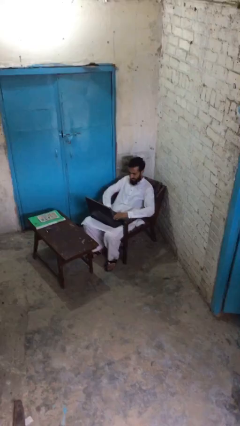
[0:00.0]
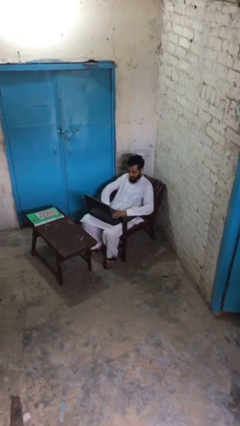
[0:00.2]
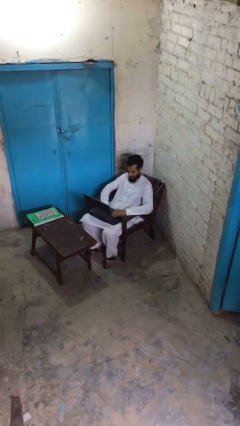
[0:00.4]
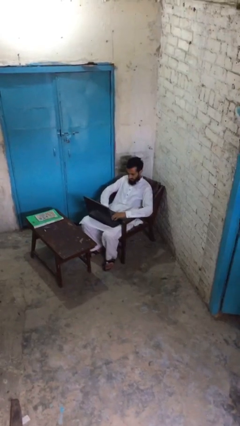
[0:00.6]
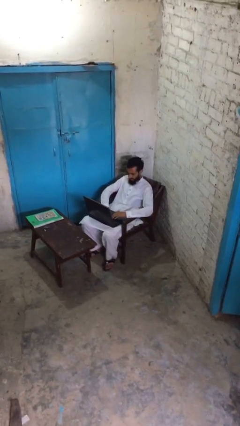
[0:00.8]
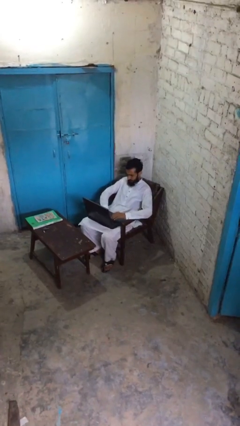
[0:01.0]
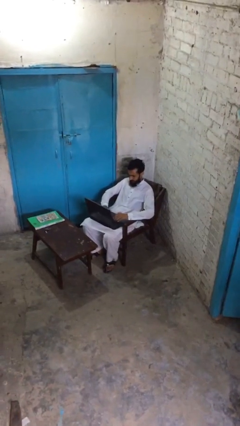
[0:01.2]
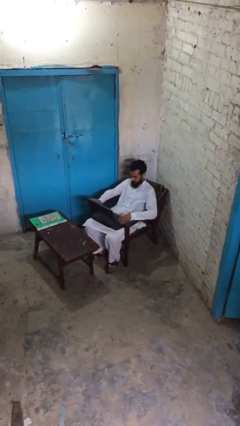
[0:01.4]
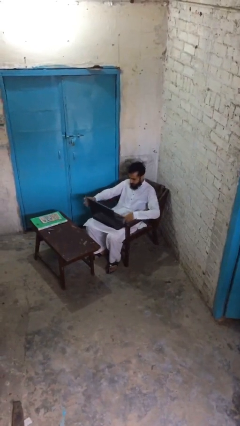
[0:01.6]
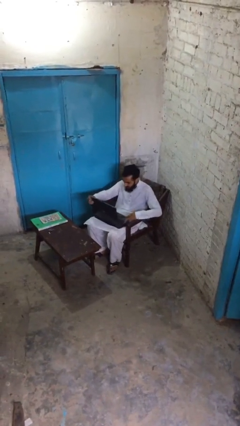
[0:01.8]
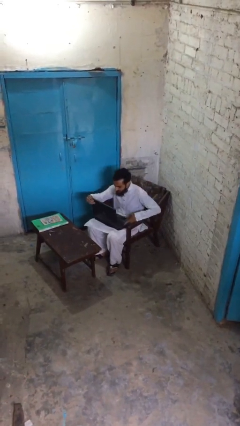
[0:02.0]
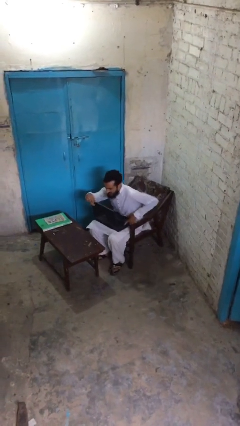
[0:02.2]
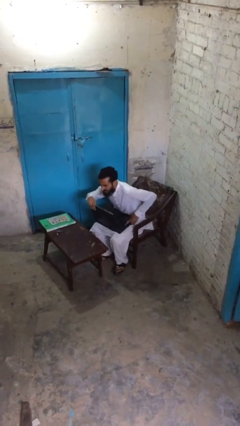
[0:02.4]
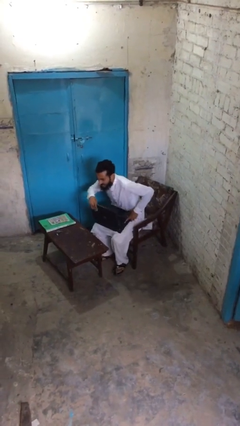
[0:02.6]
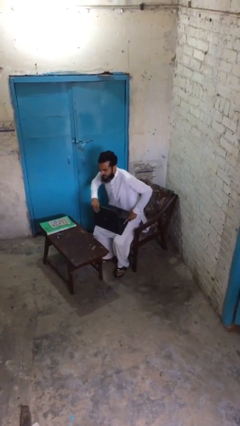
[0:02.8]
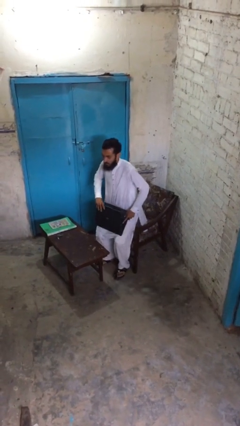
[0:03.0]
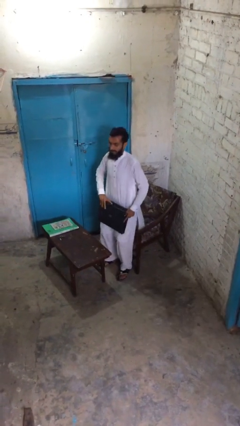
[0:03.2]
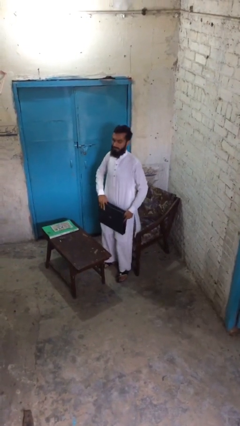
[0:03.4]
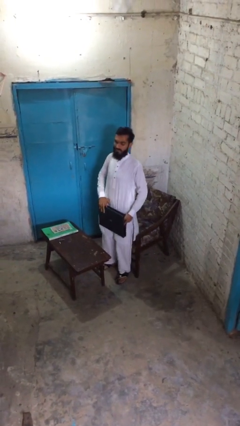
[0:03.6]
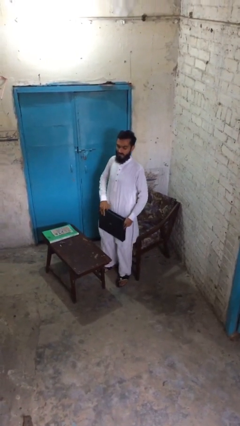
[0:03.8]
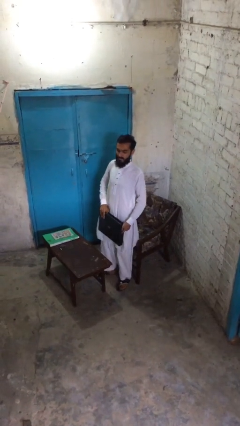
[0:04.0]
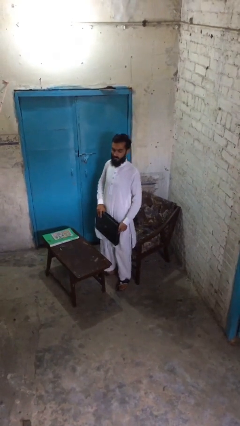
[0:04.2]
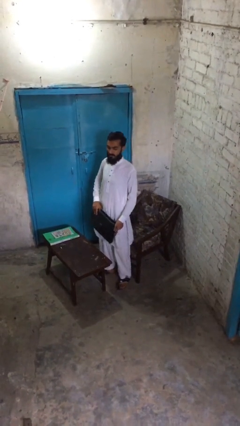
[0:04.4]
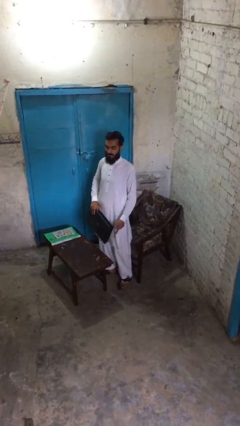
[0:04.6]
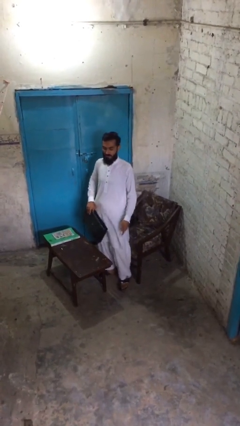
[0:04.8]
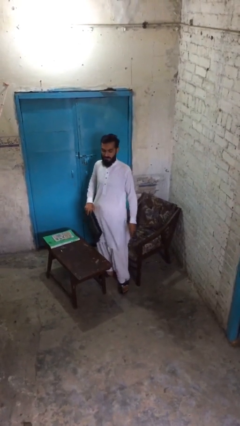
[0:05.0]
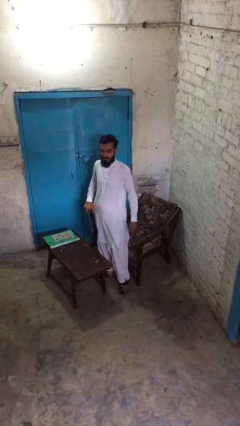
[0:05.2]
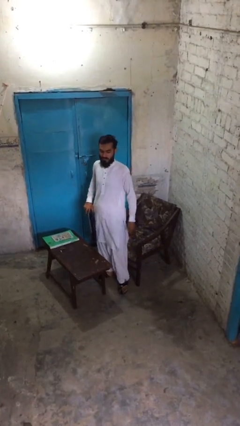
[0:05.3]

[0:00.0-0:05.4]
person stands up

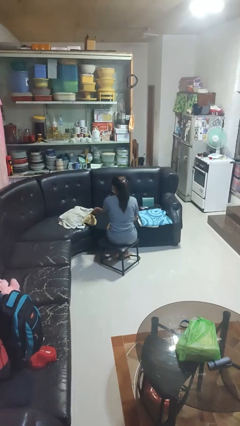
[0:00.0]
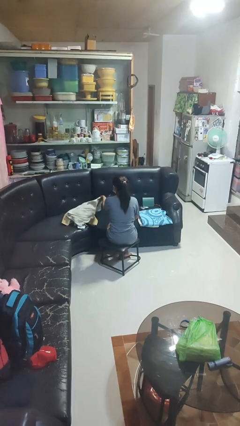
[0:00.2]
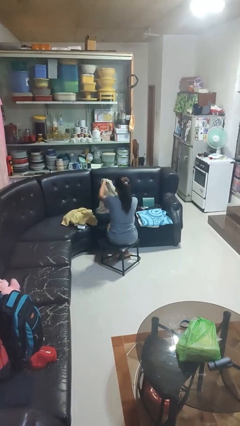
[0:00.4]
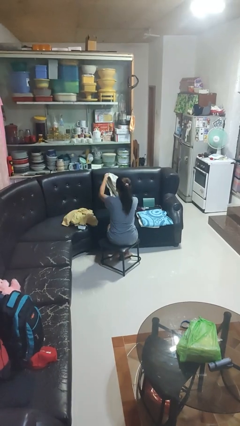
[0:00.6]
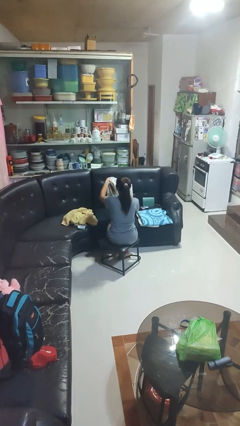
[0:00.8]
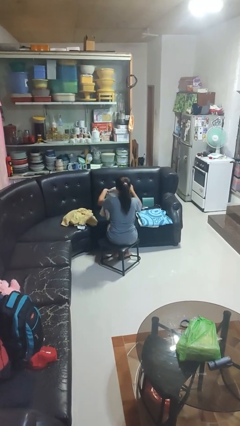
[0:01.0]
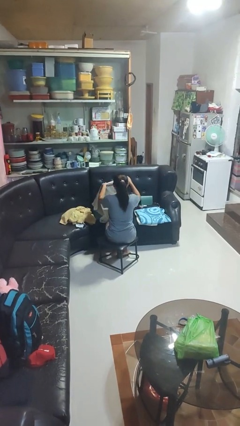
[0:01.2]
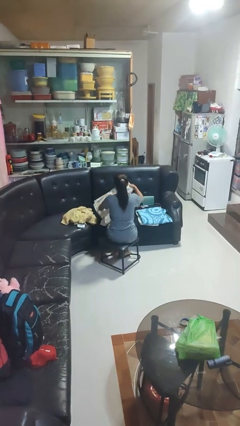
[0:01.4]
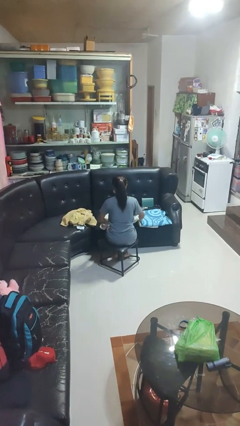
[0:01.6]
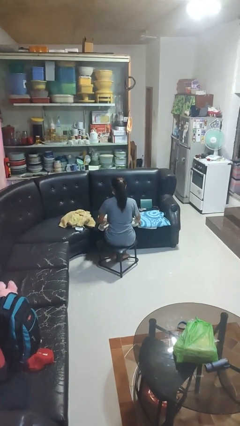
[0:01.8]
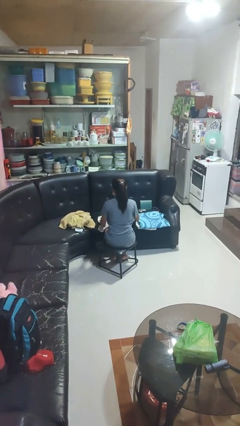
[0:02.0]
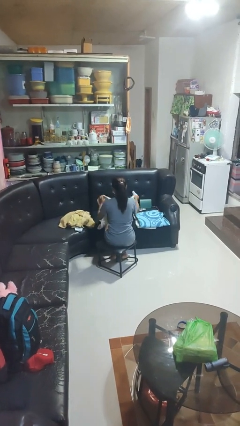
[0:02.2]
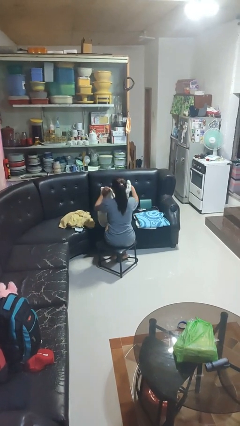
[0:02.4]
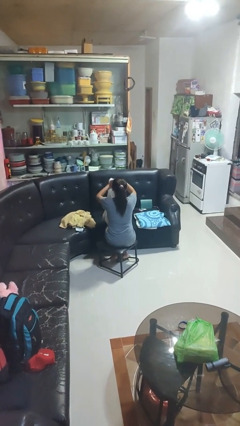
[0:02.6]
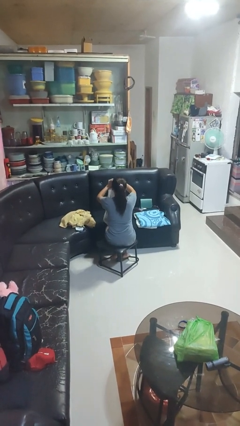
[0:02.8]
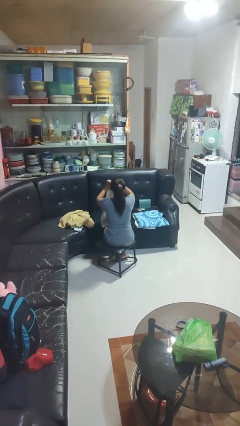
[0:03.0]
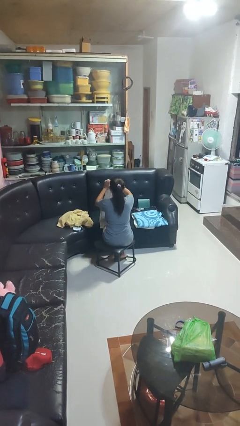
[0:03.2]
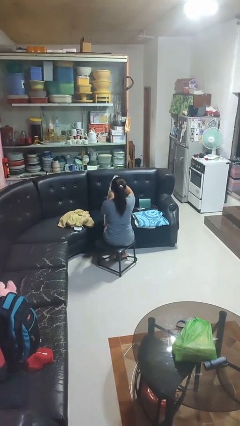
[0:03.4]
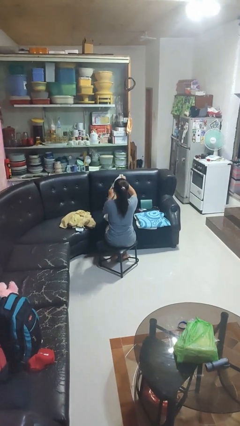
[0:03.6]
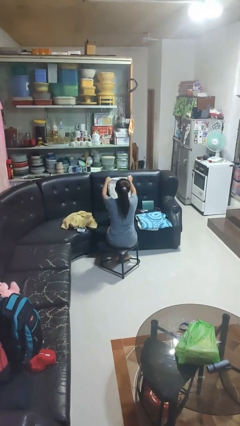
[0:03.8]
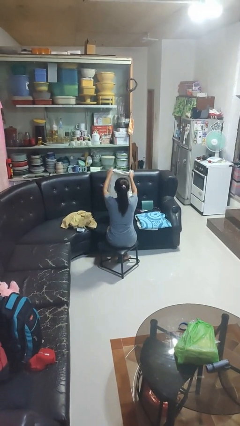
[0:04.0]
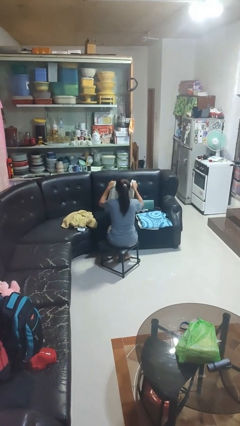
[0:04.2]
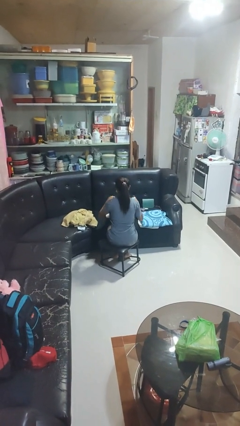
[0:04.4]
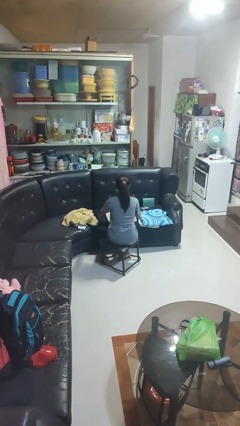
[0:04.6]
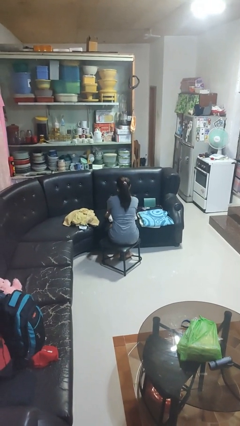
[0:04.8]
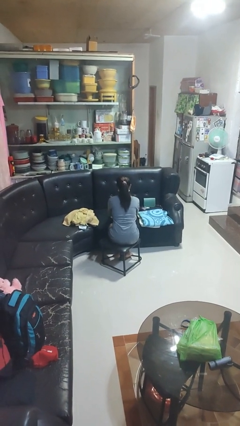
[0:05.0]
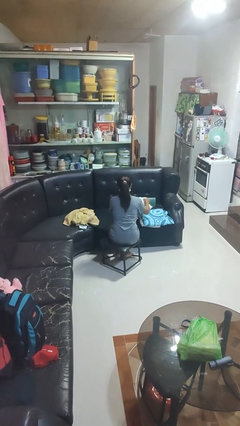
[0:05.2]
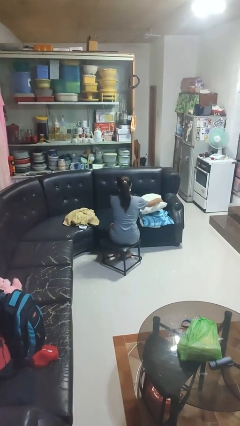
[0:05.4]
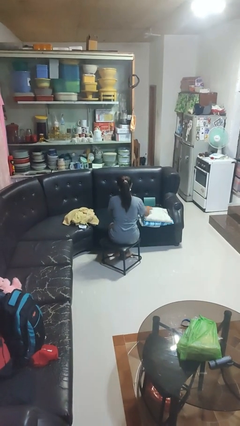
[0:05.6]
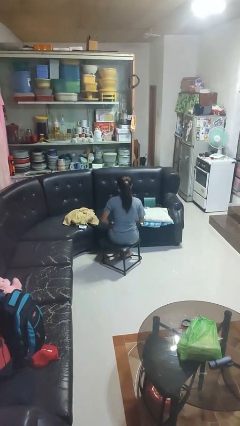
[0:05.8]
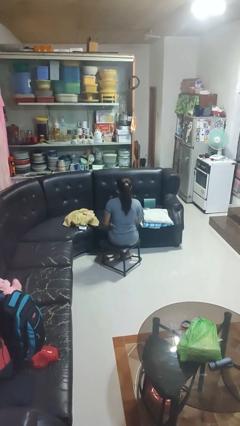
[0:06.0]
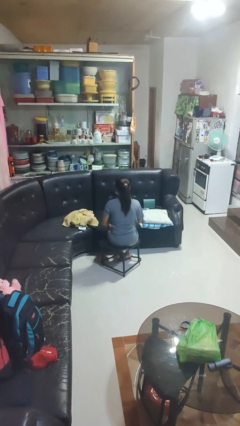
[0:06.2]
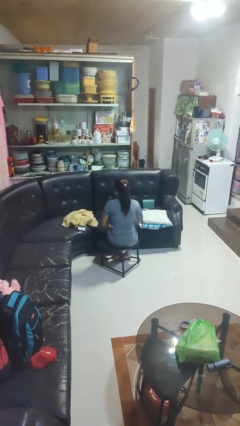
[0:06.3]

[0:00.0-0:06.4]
person folds towel

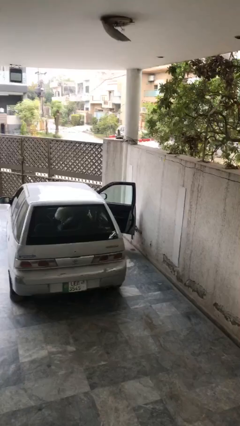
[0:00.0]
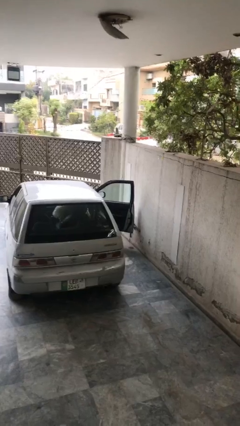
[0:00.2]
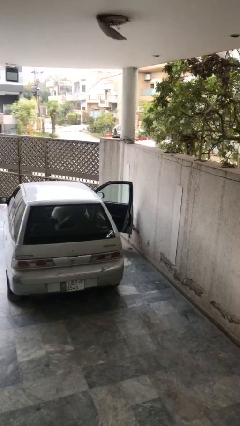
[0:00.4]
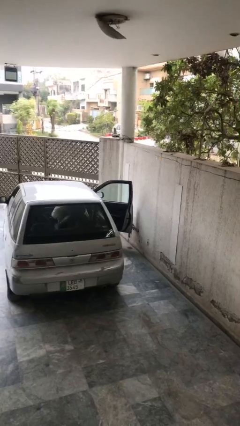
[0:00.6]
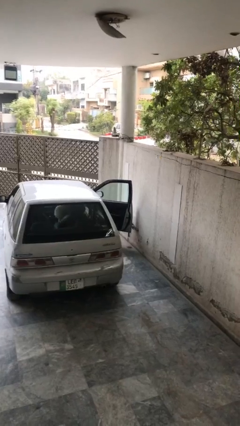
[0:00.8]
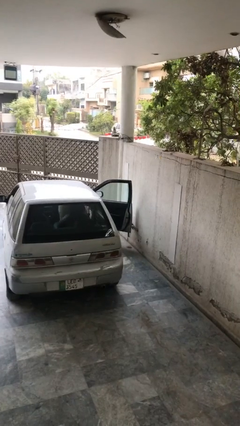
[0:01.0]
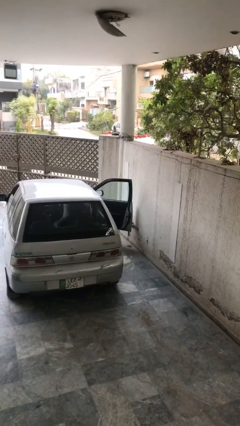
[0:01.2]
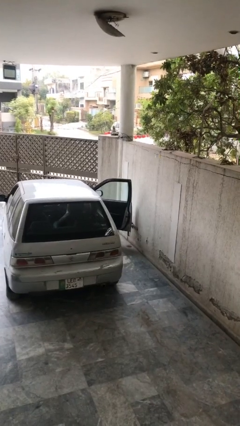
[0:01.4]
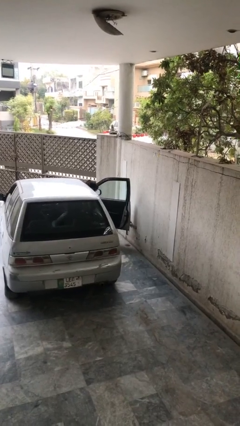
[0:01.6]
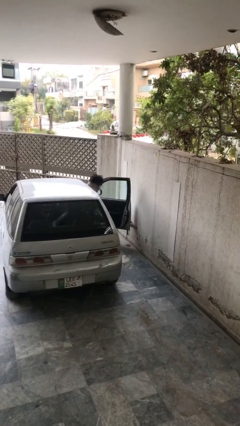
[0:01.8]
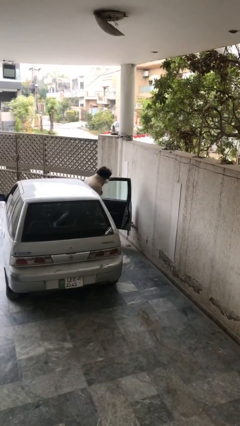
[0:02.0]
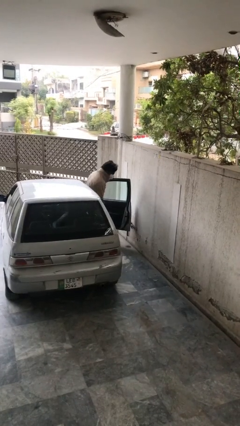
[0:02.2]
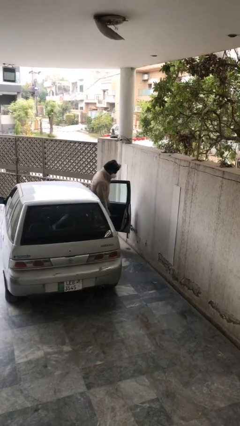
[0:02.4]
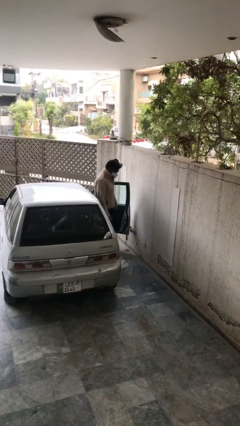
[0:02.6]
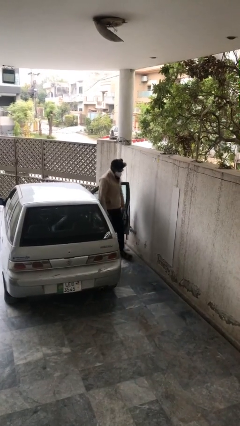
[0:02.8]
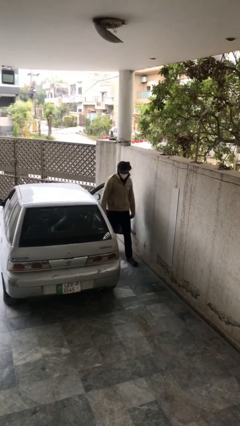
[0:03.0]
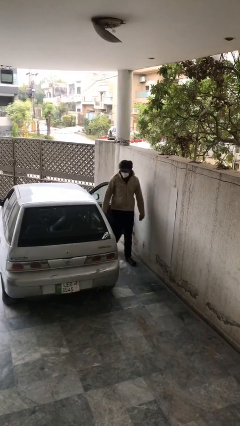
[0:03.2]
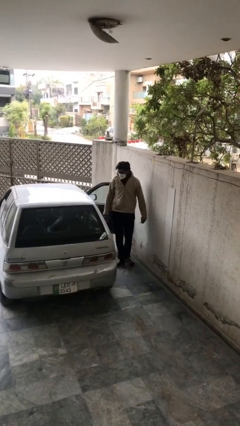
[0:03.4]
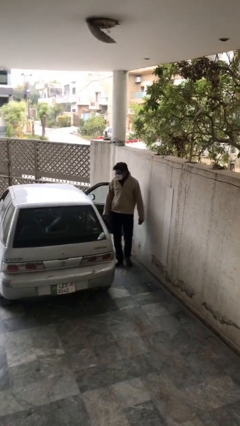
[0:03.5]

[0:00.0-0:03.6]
person exits car

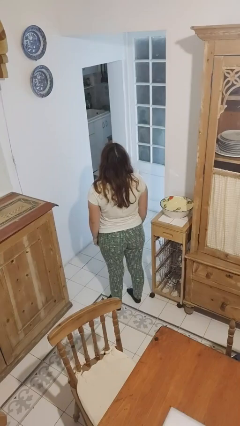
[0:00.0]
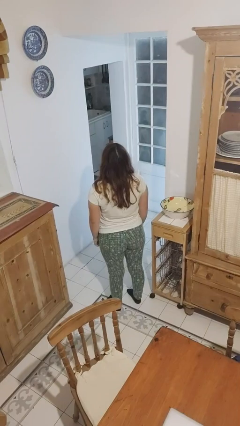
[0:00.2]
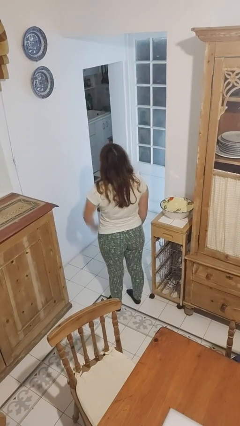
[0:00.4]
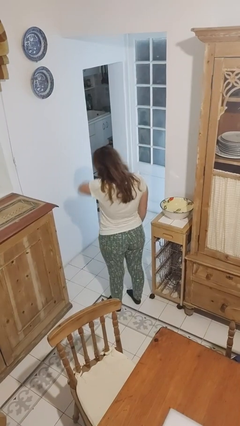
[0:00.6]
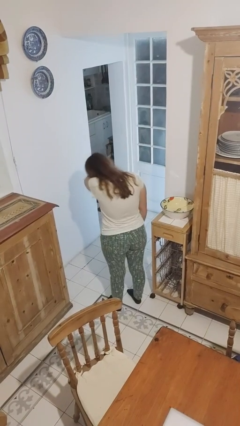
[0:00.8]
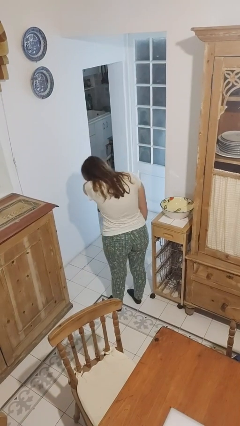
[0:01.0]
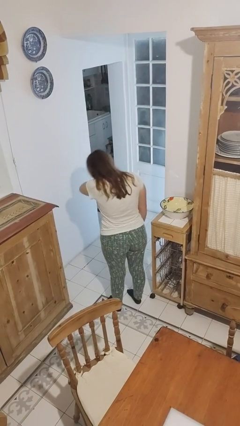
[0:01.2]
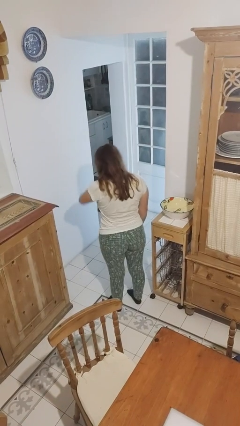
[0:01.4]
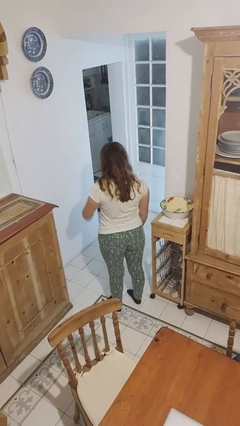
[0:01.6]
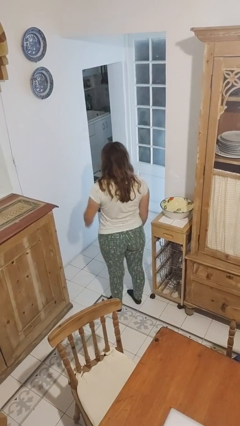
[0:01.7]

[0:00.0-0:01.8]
person sneezes into arm

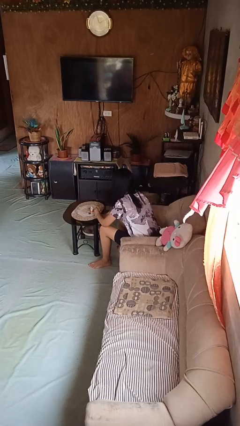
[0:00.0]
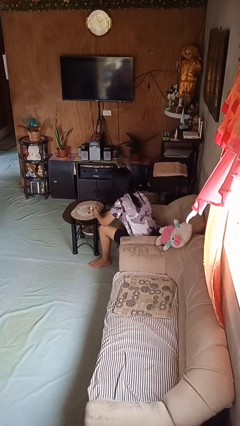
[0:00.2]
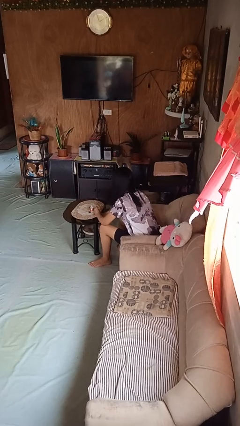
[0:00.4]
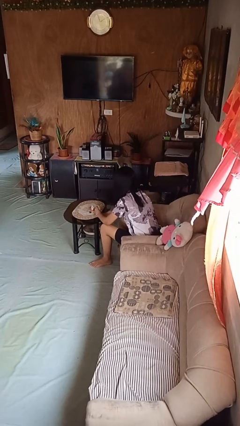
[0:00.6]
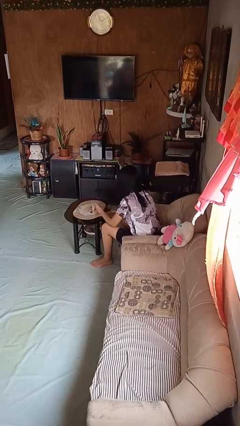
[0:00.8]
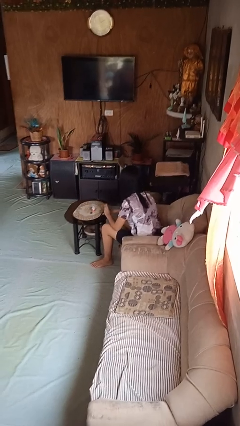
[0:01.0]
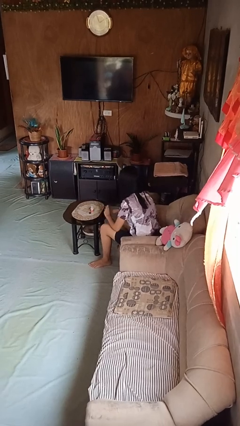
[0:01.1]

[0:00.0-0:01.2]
person paints fingernails
